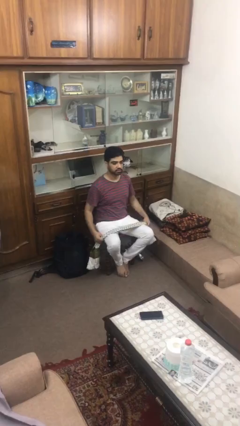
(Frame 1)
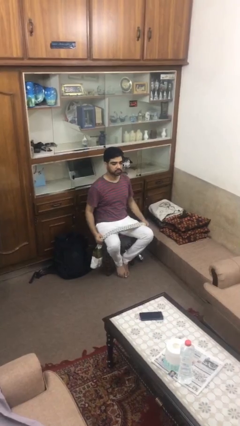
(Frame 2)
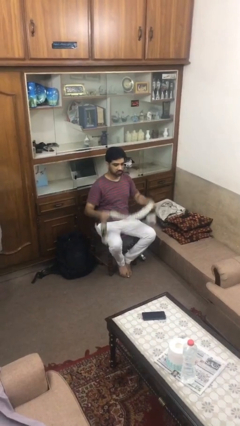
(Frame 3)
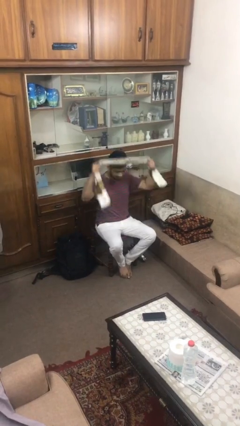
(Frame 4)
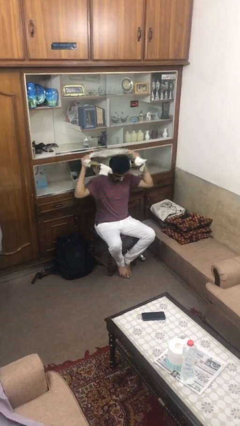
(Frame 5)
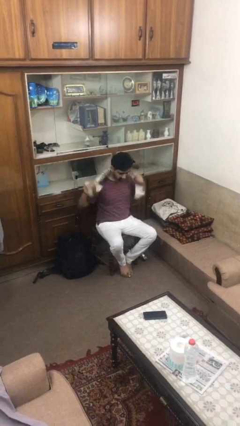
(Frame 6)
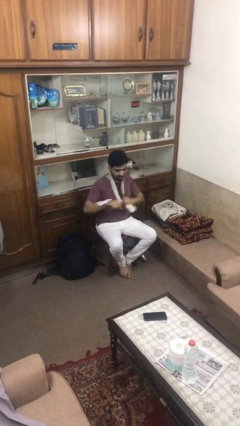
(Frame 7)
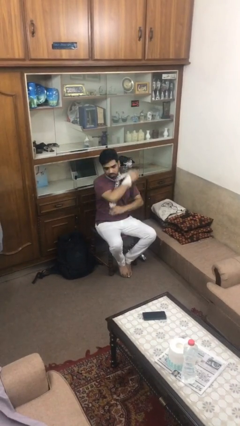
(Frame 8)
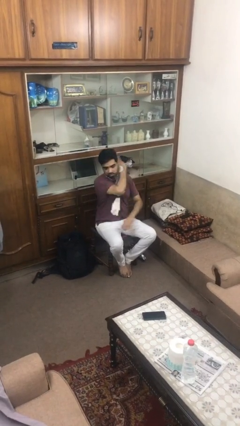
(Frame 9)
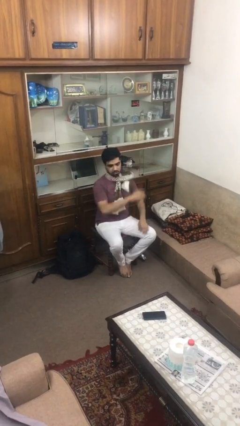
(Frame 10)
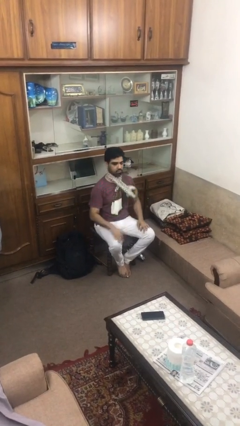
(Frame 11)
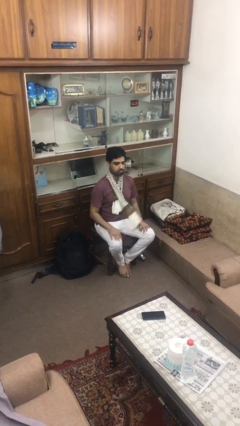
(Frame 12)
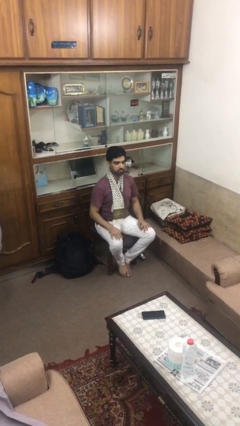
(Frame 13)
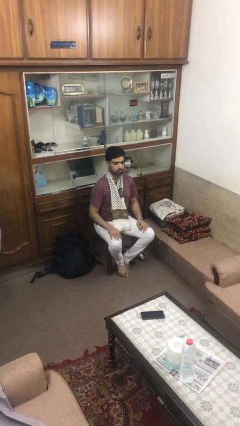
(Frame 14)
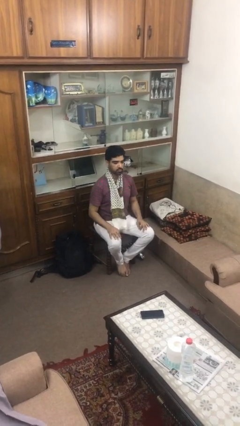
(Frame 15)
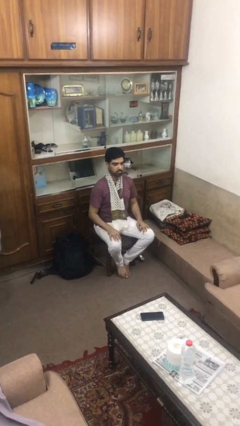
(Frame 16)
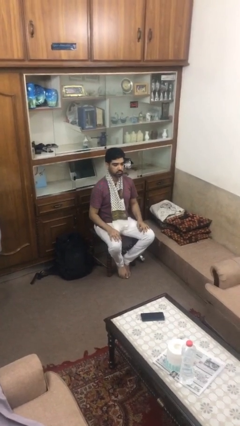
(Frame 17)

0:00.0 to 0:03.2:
person puts on scarf

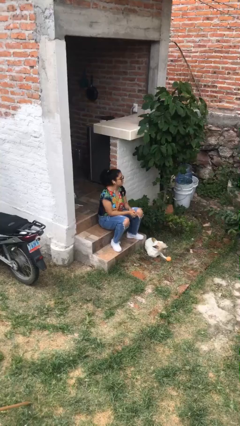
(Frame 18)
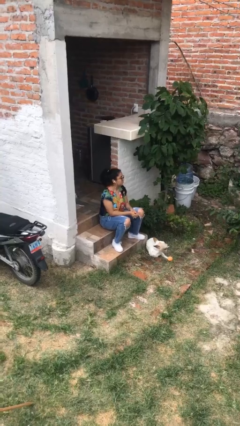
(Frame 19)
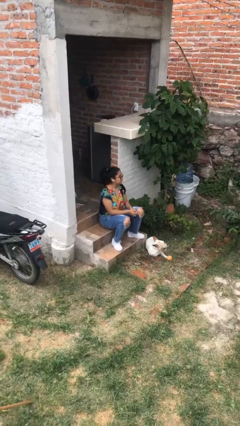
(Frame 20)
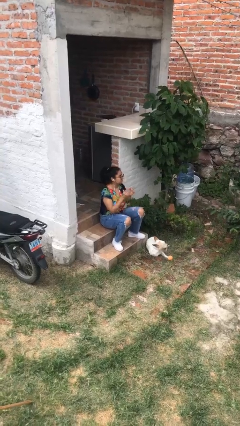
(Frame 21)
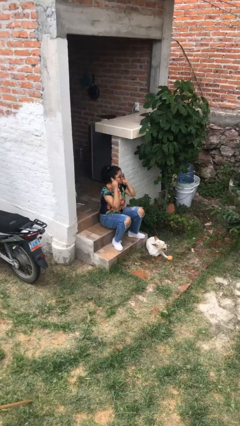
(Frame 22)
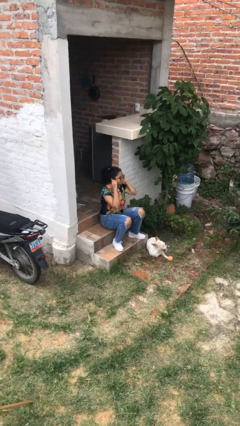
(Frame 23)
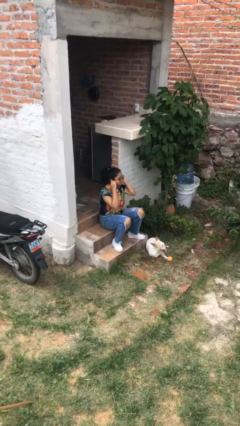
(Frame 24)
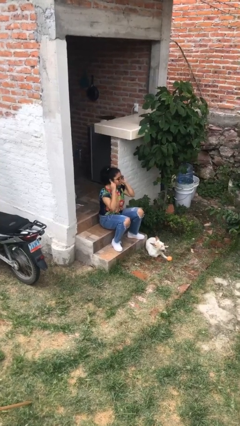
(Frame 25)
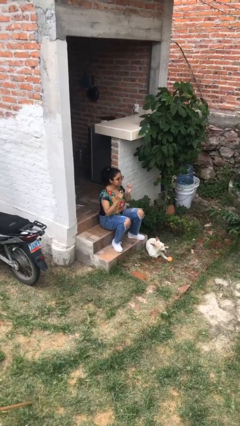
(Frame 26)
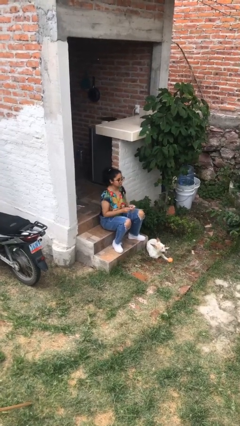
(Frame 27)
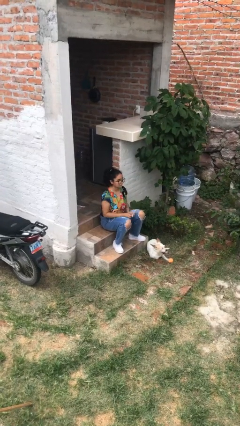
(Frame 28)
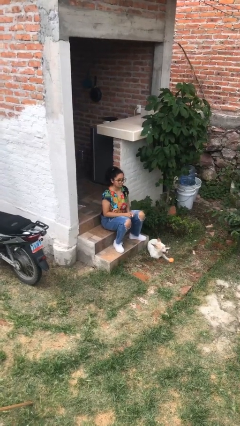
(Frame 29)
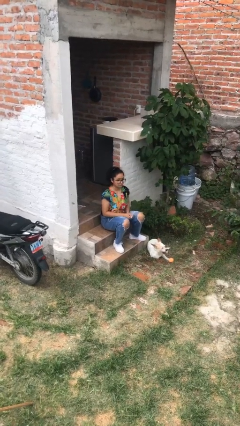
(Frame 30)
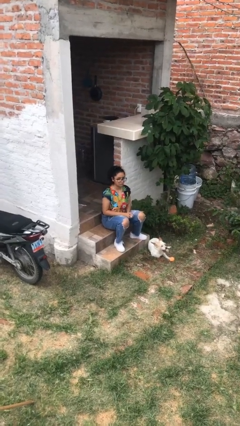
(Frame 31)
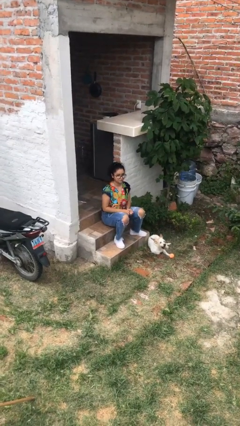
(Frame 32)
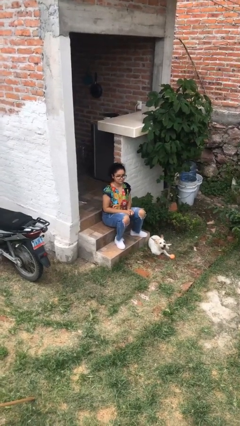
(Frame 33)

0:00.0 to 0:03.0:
person takes off headphones

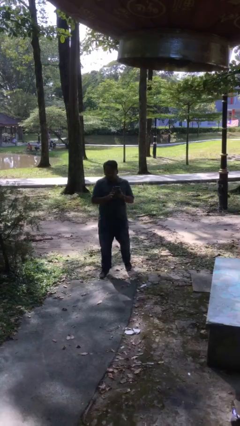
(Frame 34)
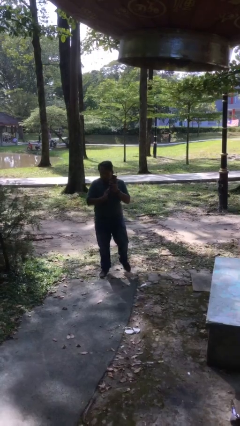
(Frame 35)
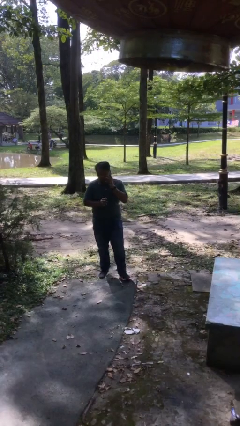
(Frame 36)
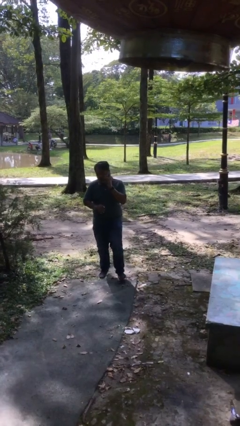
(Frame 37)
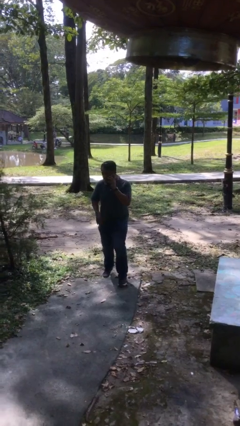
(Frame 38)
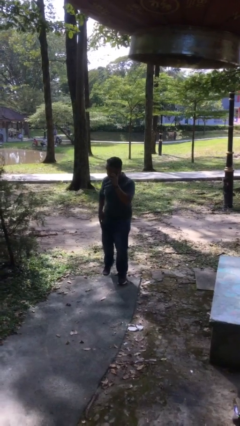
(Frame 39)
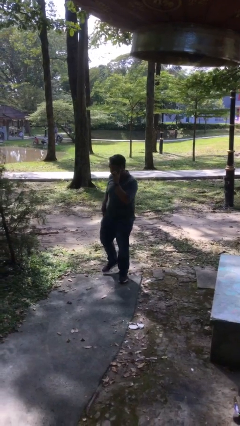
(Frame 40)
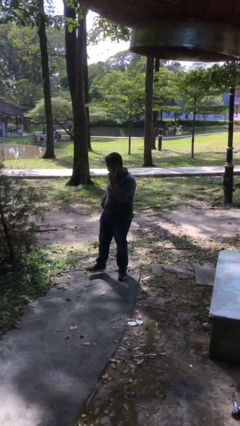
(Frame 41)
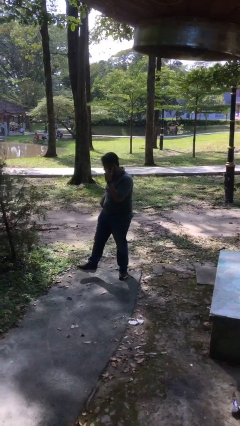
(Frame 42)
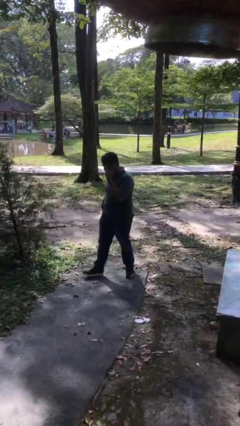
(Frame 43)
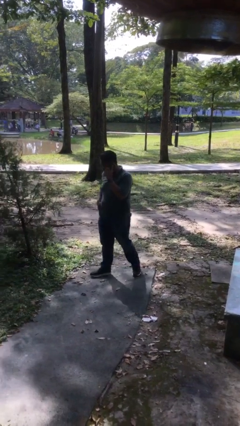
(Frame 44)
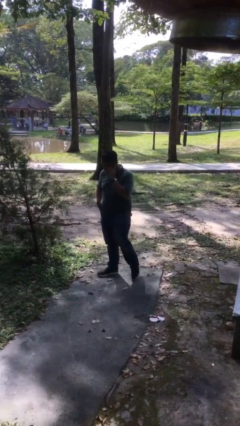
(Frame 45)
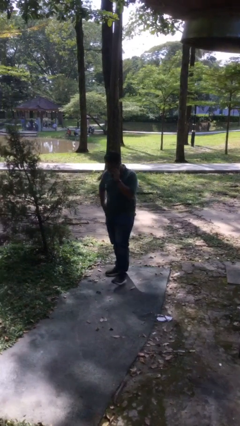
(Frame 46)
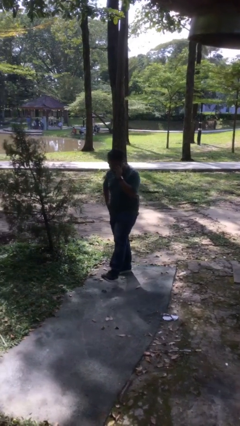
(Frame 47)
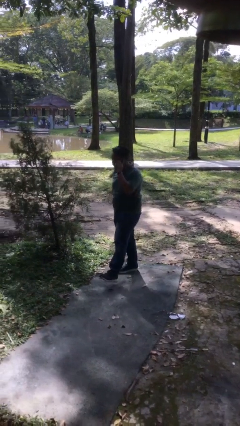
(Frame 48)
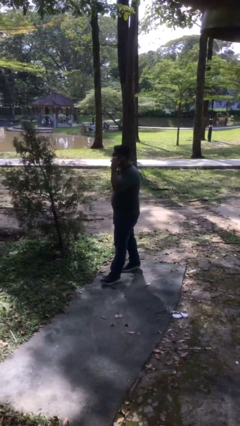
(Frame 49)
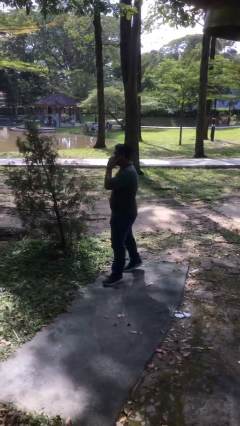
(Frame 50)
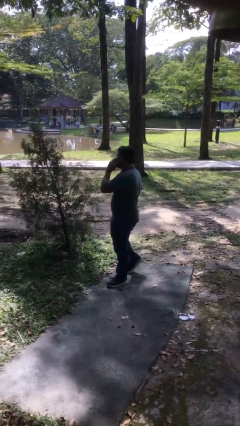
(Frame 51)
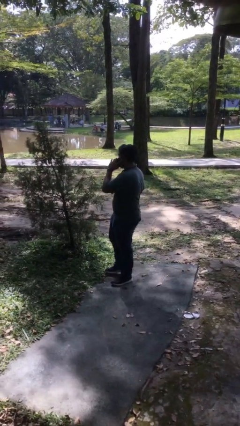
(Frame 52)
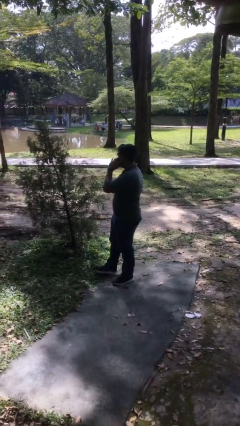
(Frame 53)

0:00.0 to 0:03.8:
person talks on phone

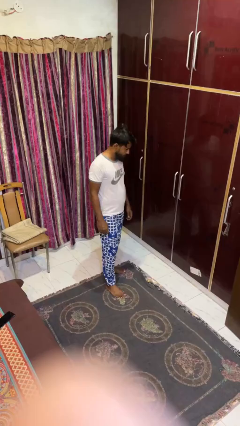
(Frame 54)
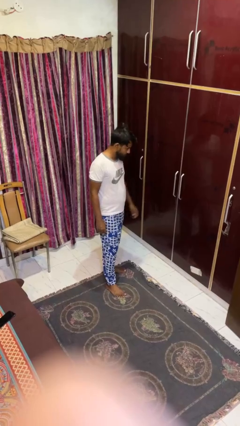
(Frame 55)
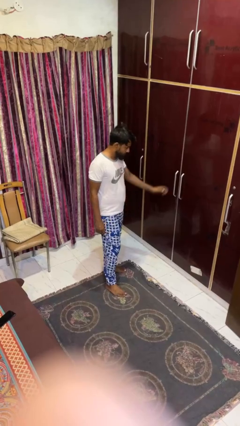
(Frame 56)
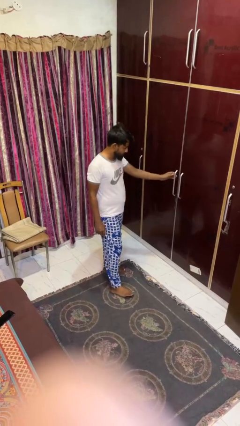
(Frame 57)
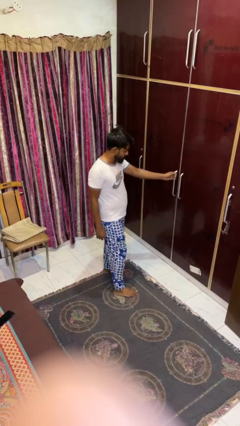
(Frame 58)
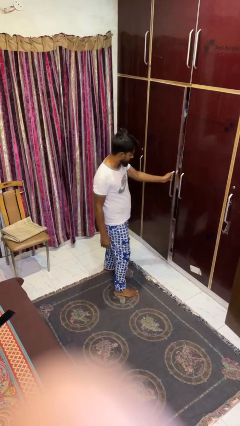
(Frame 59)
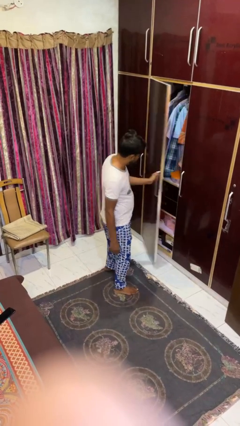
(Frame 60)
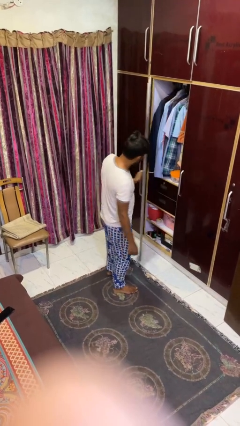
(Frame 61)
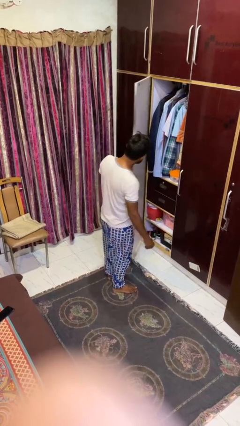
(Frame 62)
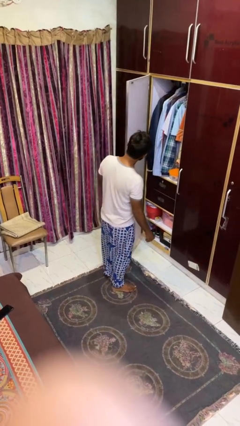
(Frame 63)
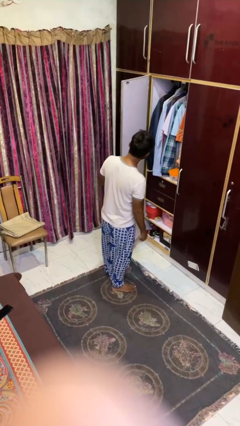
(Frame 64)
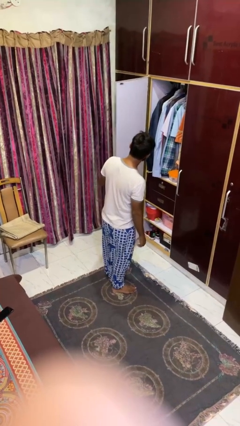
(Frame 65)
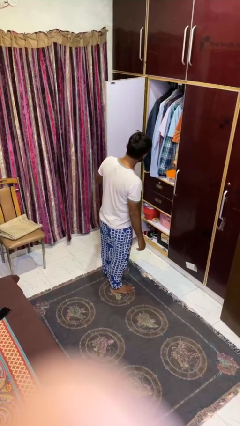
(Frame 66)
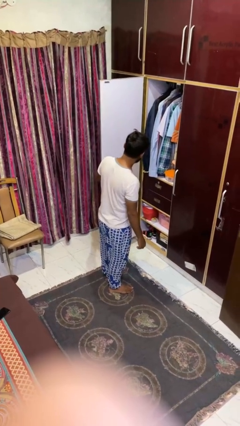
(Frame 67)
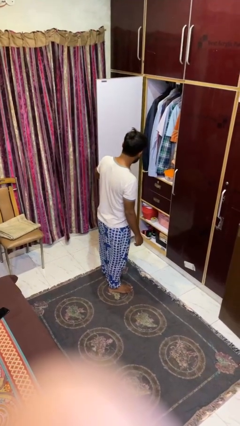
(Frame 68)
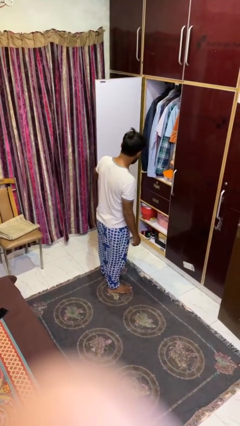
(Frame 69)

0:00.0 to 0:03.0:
person opens closet door

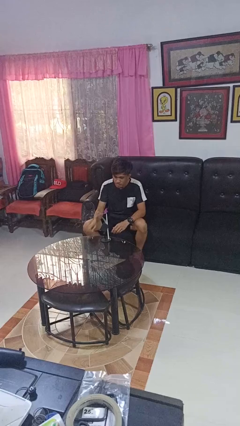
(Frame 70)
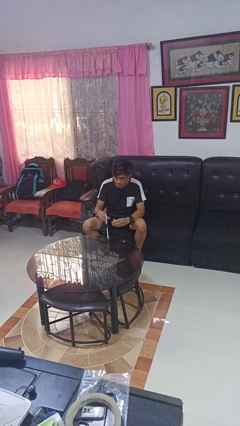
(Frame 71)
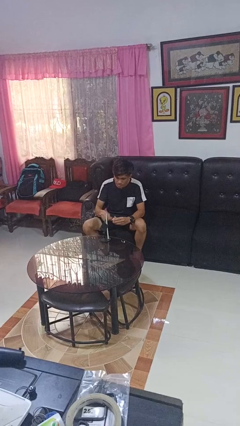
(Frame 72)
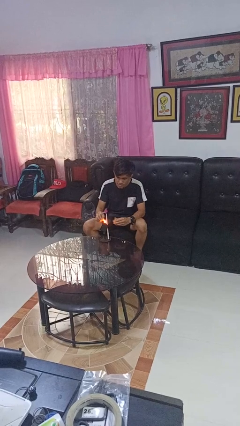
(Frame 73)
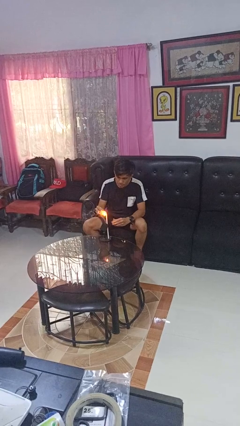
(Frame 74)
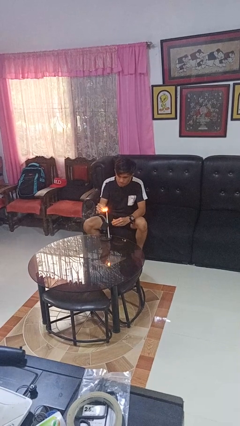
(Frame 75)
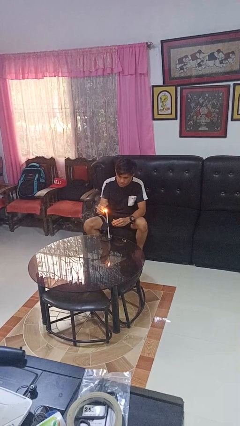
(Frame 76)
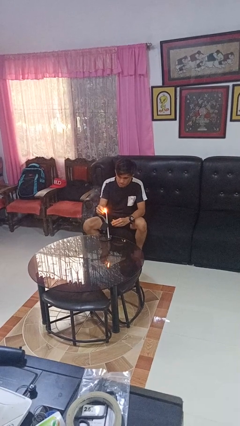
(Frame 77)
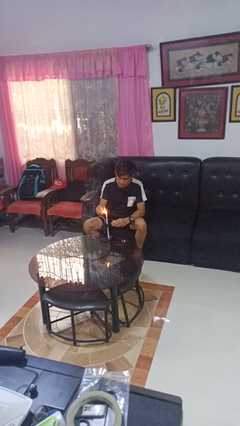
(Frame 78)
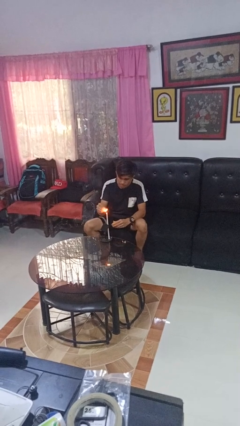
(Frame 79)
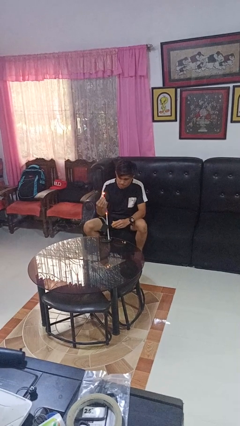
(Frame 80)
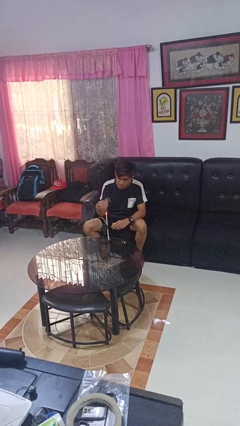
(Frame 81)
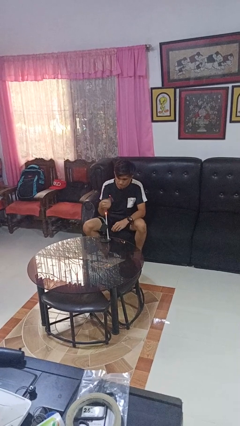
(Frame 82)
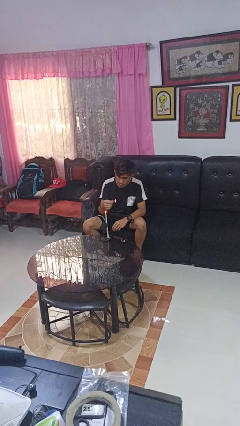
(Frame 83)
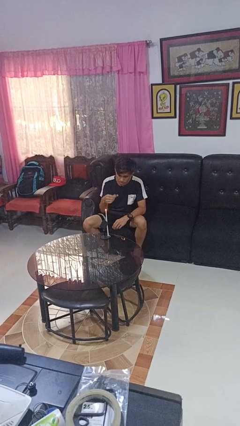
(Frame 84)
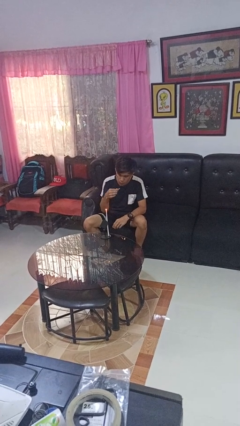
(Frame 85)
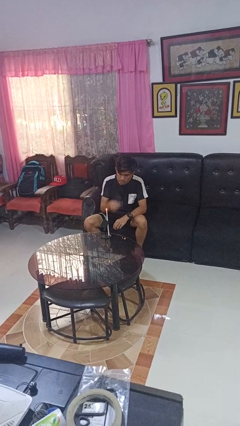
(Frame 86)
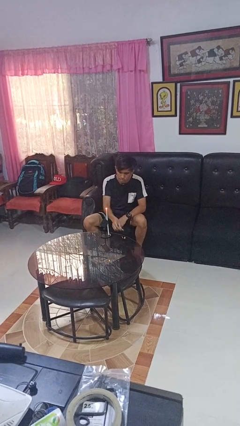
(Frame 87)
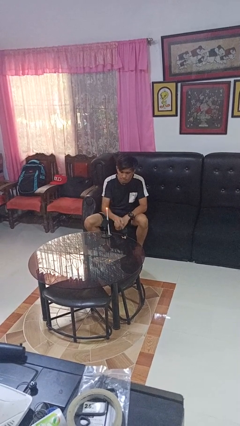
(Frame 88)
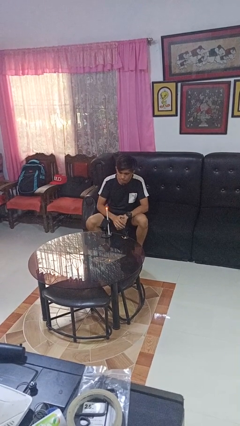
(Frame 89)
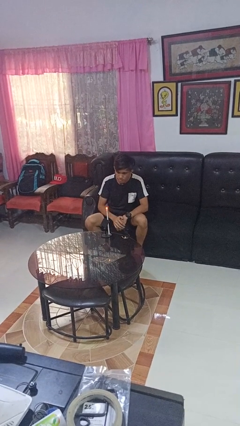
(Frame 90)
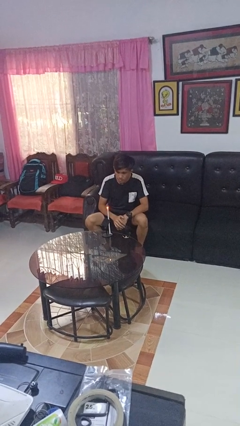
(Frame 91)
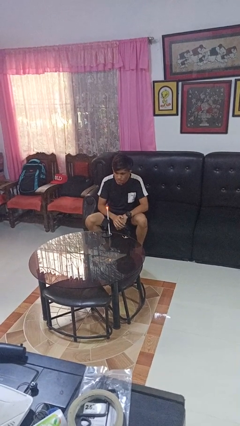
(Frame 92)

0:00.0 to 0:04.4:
person lights candle
